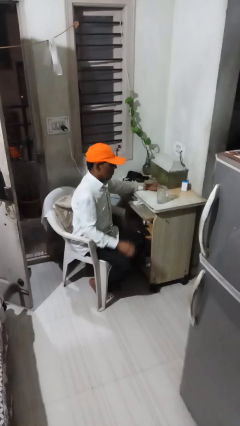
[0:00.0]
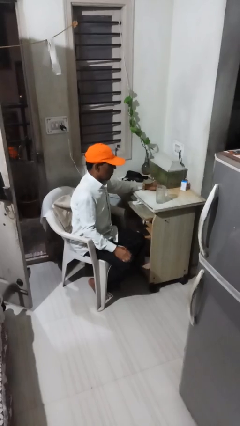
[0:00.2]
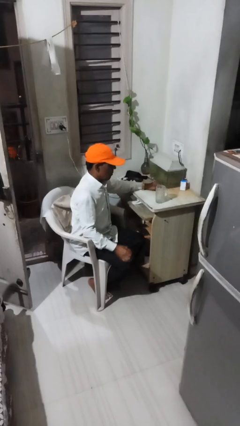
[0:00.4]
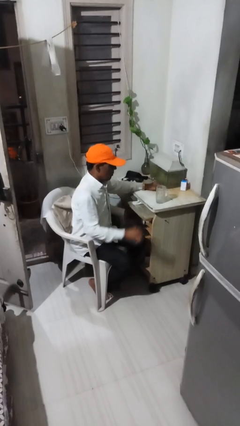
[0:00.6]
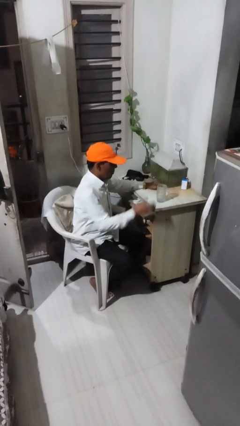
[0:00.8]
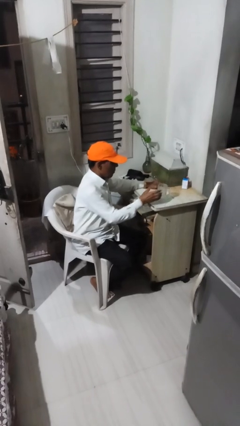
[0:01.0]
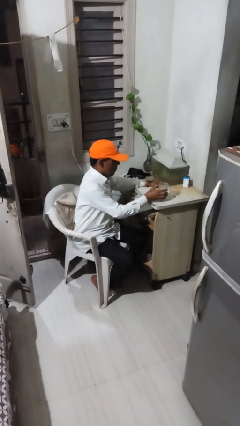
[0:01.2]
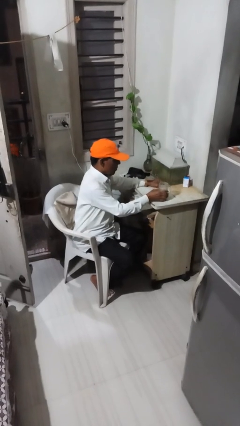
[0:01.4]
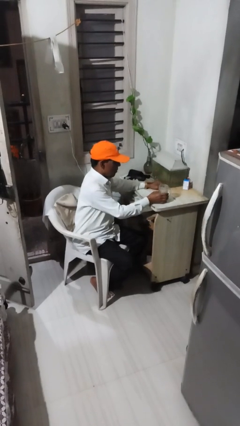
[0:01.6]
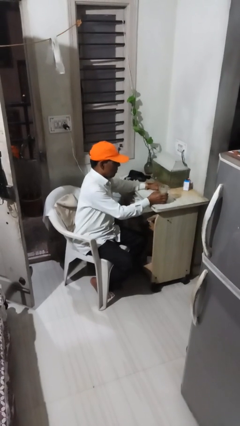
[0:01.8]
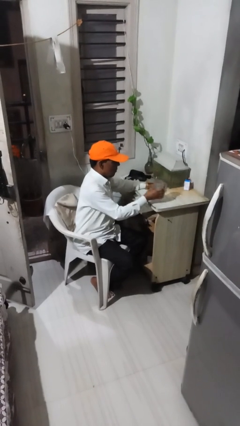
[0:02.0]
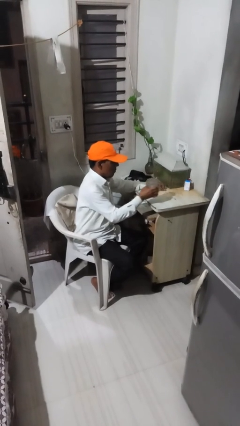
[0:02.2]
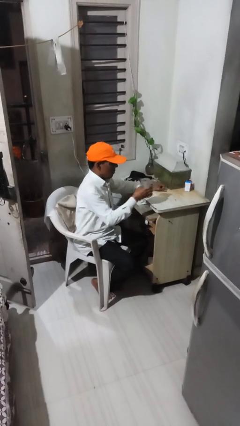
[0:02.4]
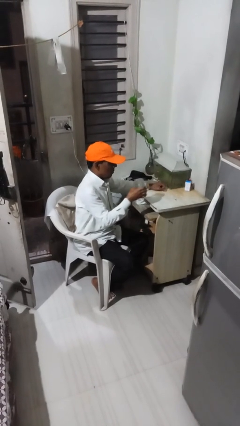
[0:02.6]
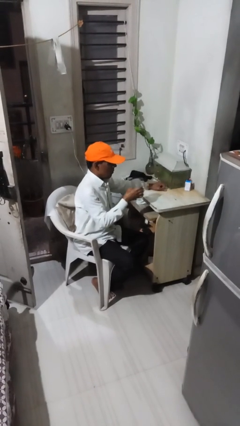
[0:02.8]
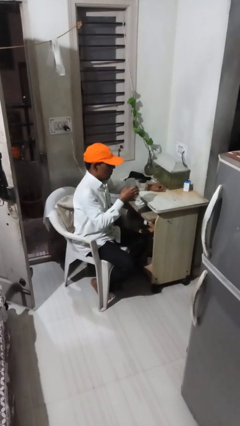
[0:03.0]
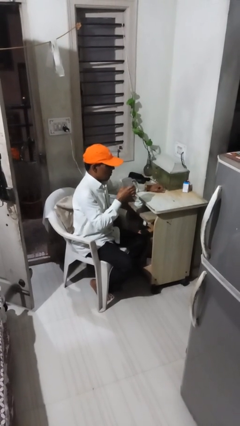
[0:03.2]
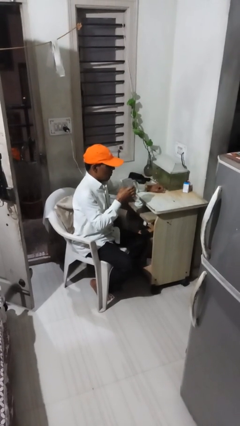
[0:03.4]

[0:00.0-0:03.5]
person picks up object from table

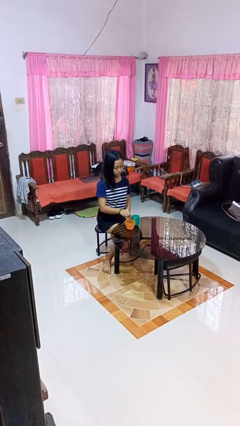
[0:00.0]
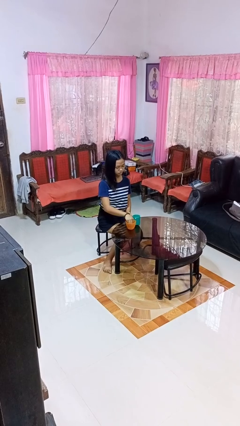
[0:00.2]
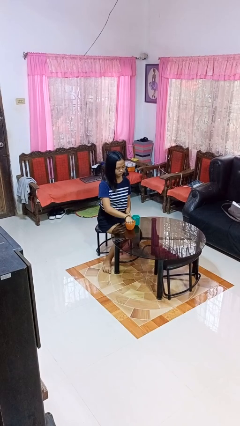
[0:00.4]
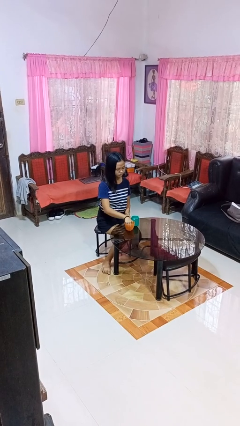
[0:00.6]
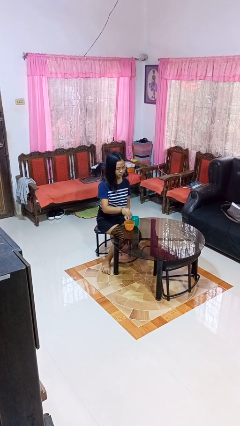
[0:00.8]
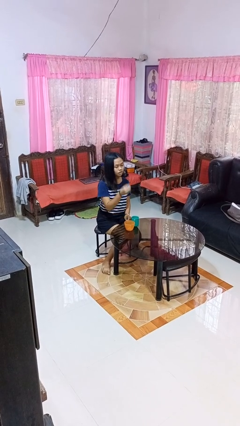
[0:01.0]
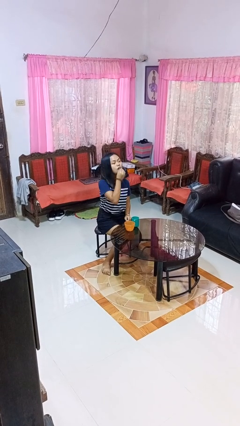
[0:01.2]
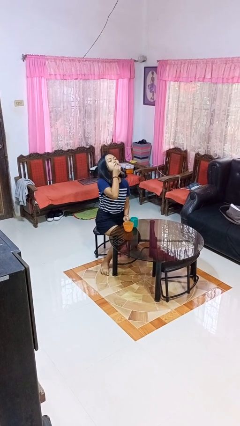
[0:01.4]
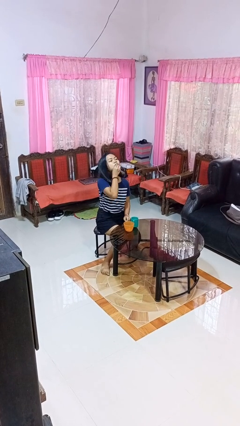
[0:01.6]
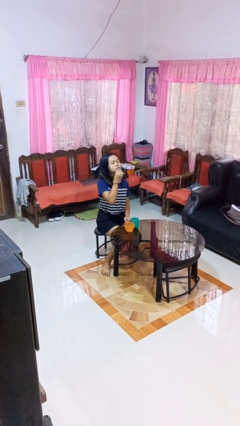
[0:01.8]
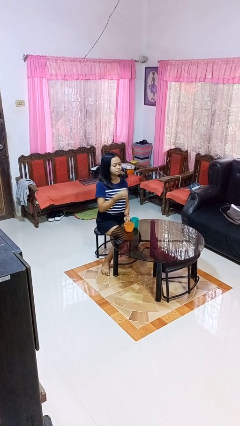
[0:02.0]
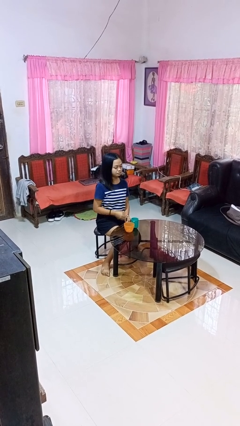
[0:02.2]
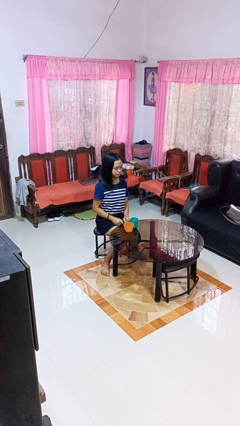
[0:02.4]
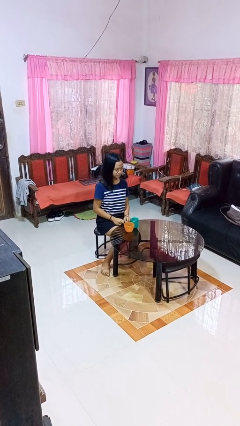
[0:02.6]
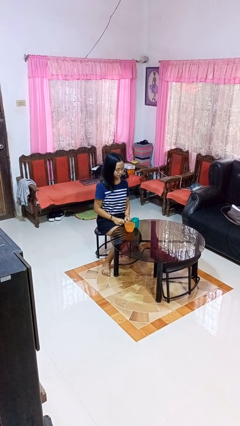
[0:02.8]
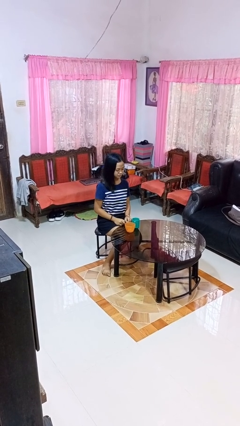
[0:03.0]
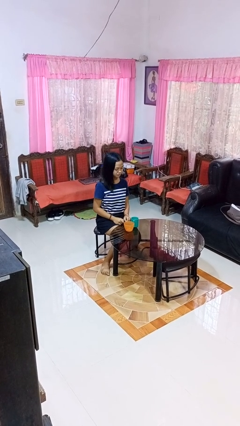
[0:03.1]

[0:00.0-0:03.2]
person takes medicine pills

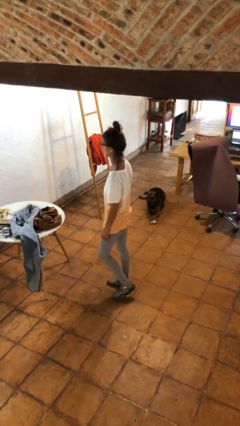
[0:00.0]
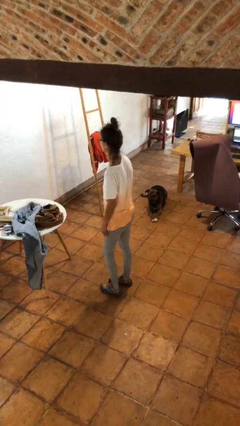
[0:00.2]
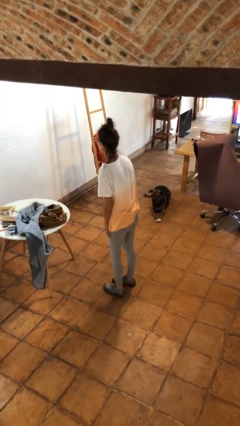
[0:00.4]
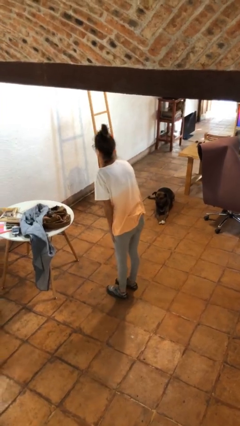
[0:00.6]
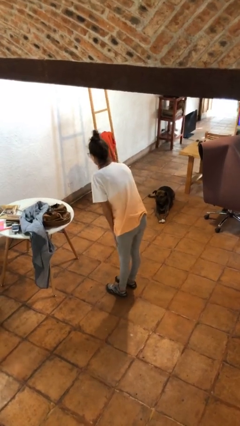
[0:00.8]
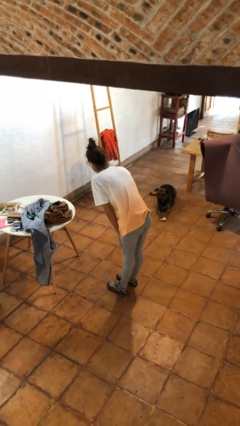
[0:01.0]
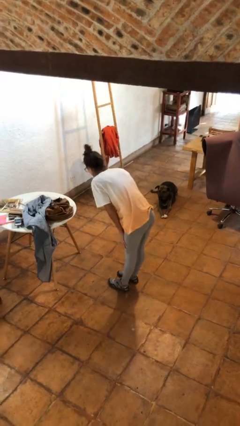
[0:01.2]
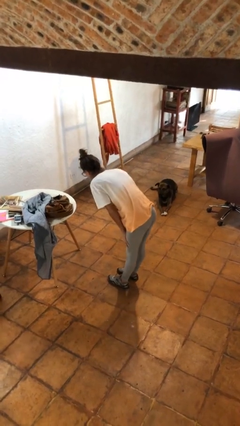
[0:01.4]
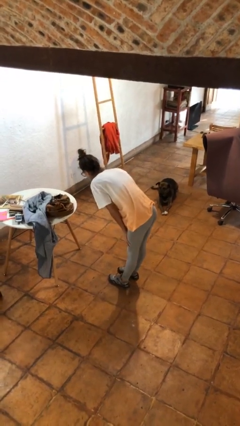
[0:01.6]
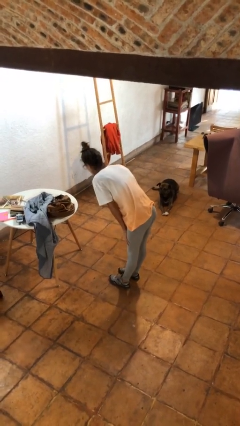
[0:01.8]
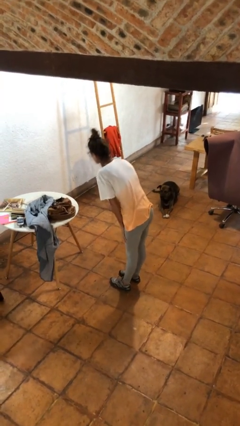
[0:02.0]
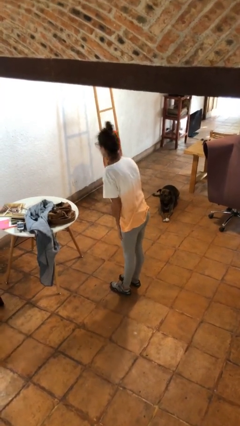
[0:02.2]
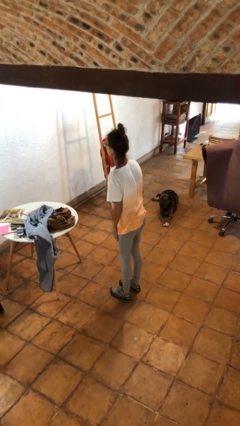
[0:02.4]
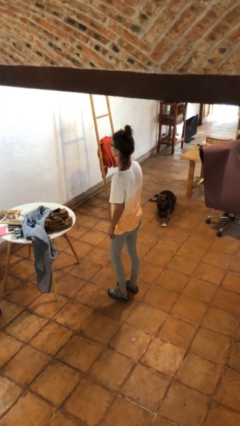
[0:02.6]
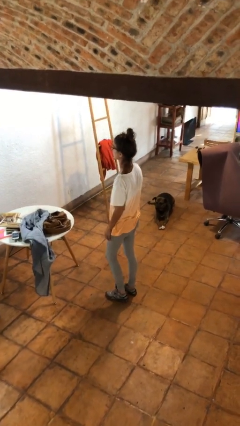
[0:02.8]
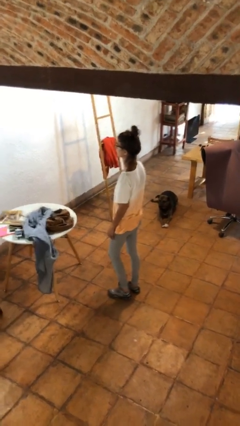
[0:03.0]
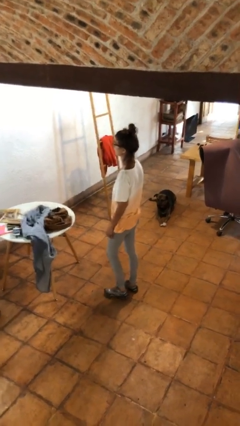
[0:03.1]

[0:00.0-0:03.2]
person bows

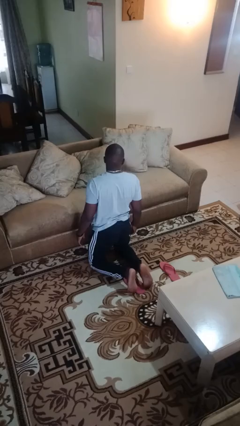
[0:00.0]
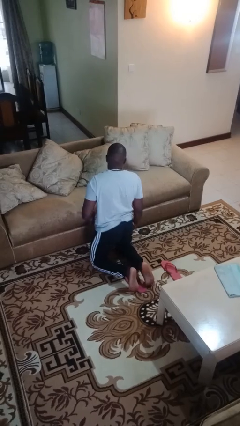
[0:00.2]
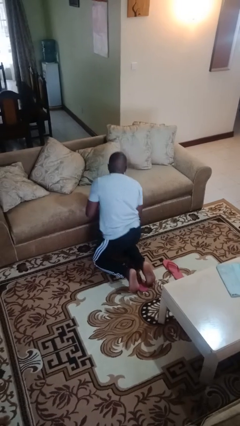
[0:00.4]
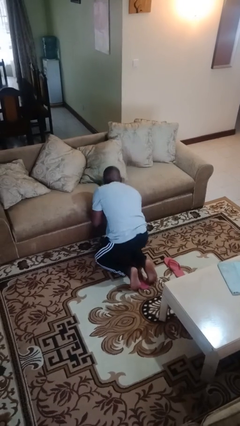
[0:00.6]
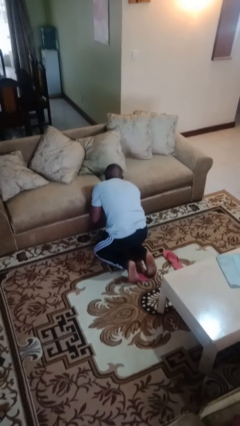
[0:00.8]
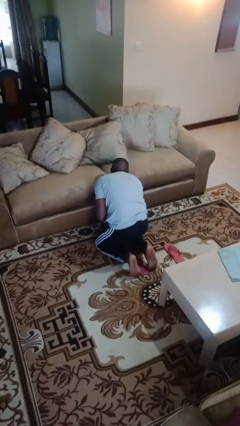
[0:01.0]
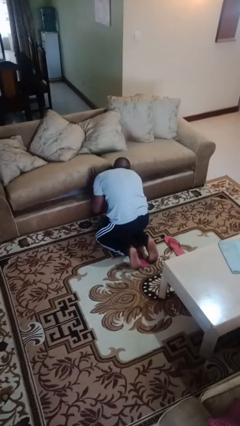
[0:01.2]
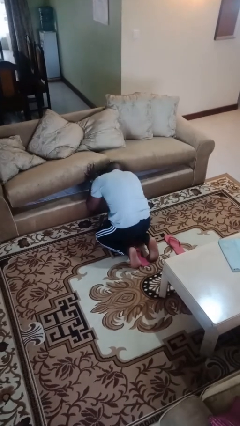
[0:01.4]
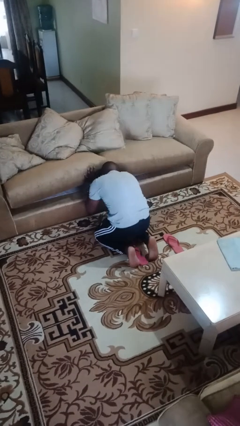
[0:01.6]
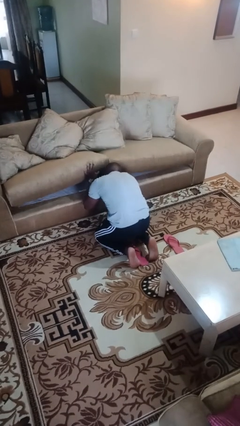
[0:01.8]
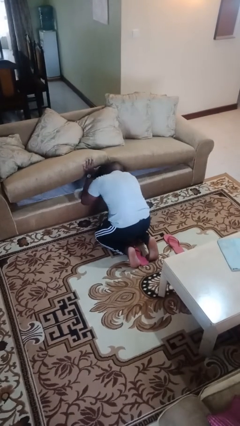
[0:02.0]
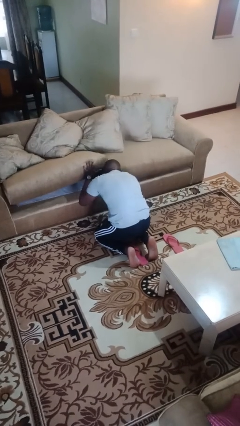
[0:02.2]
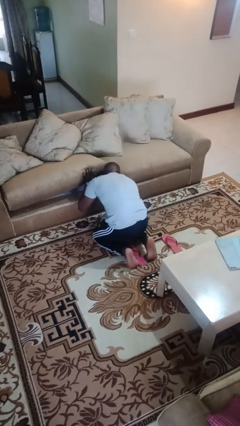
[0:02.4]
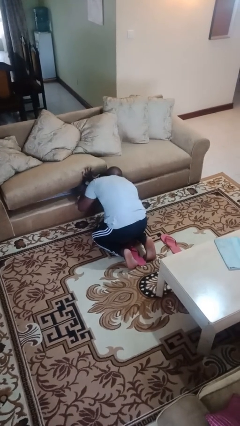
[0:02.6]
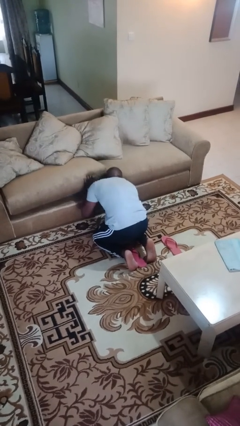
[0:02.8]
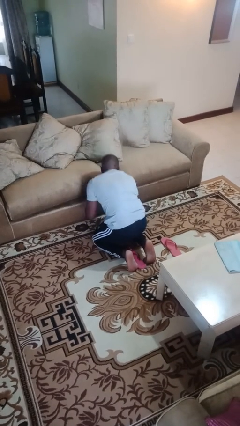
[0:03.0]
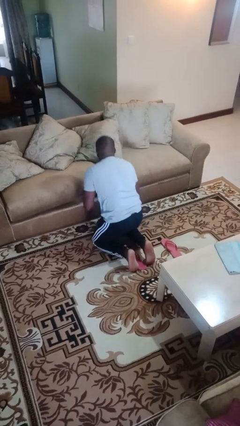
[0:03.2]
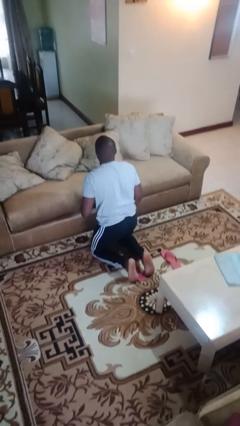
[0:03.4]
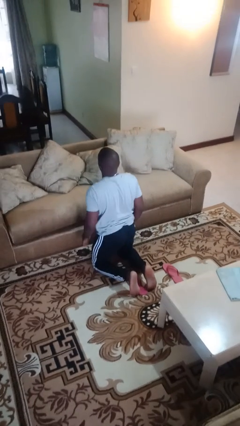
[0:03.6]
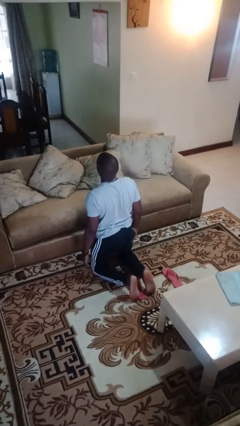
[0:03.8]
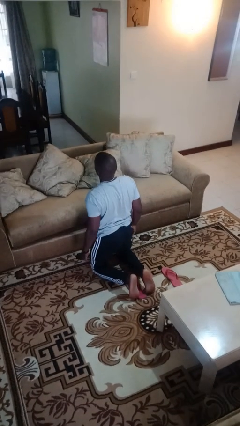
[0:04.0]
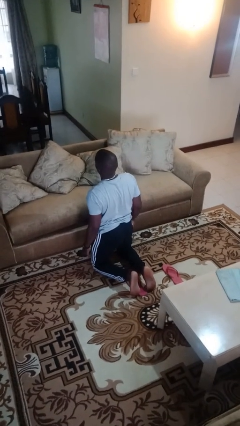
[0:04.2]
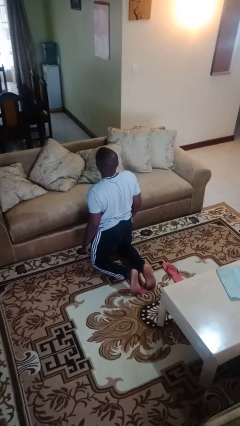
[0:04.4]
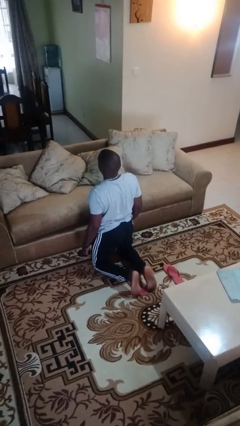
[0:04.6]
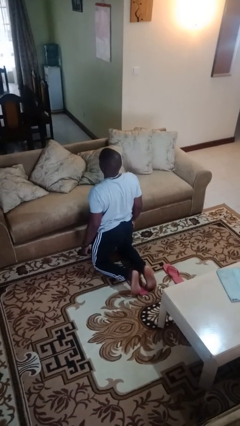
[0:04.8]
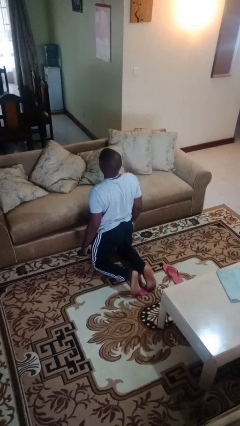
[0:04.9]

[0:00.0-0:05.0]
person searches under couch

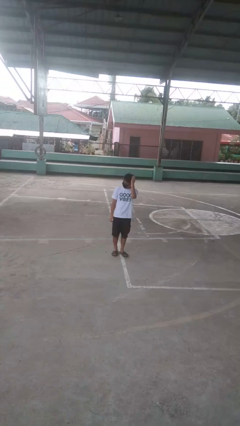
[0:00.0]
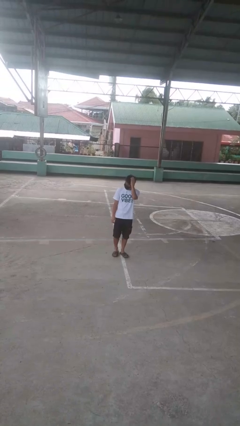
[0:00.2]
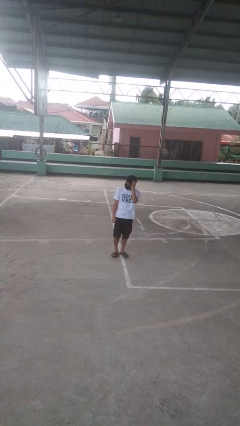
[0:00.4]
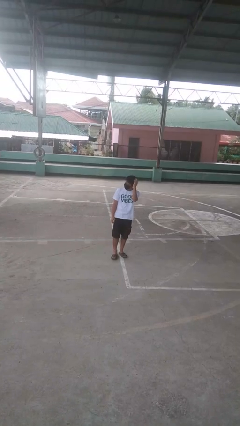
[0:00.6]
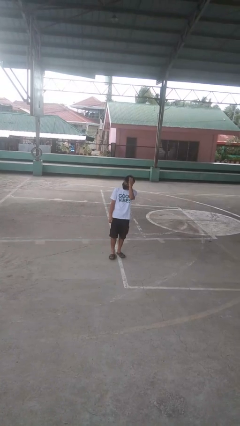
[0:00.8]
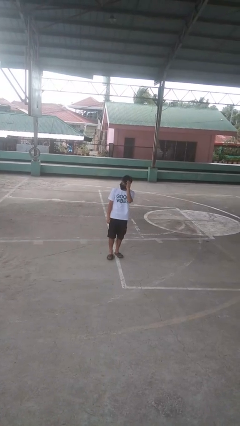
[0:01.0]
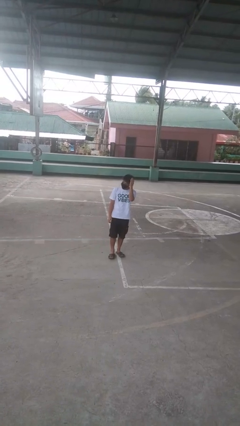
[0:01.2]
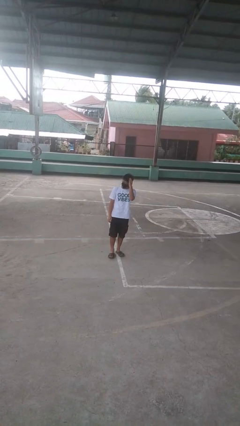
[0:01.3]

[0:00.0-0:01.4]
person pats head

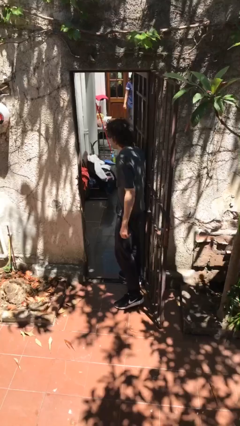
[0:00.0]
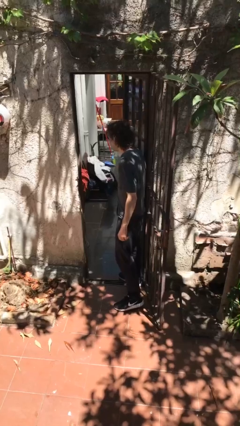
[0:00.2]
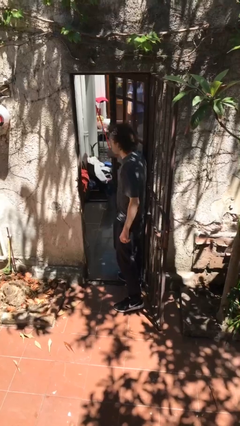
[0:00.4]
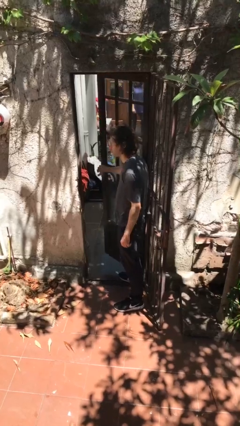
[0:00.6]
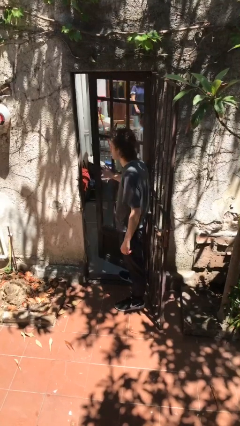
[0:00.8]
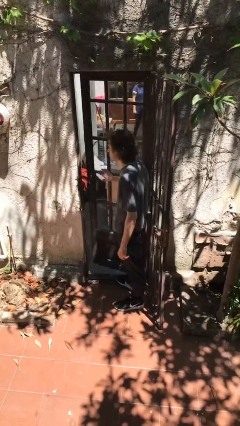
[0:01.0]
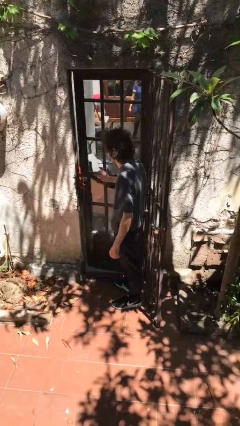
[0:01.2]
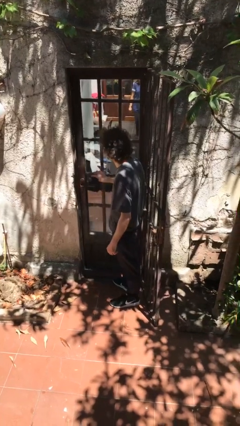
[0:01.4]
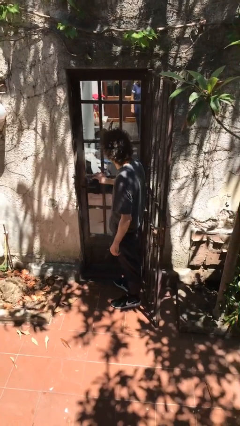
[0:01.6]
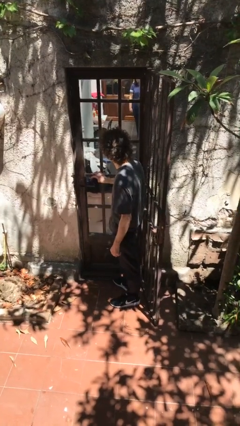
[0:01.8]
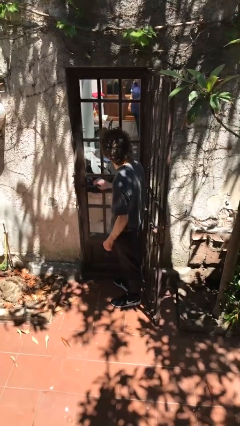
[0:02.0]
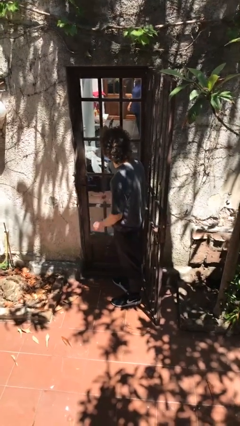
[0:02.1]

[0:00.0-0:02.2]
person closes facility door
